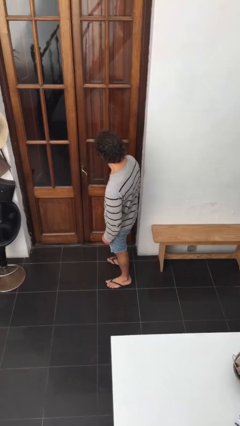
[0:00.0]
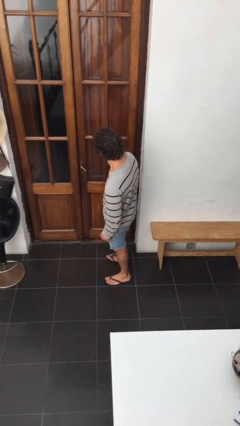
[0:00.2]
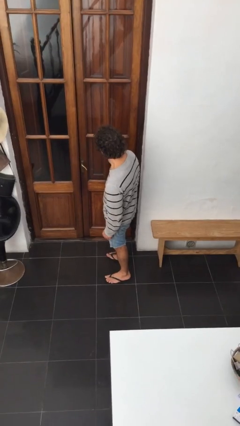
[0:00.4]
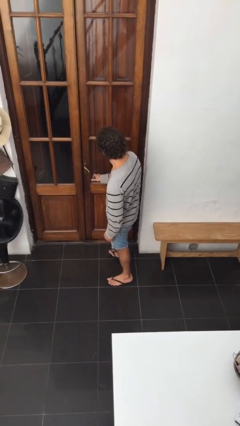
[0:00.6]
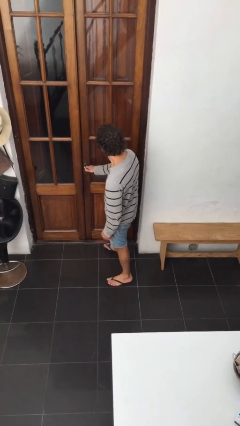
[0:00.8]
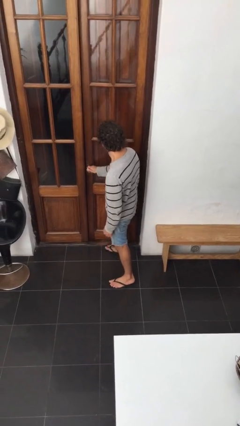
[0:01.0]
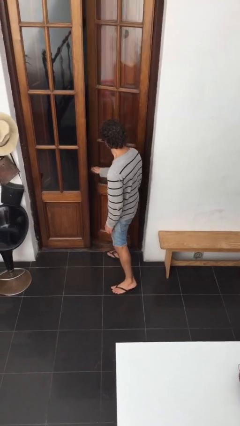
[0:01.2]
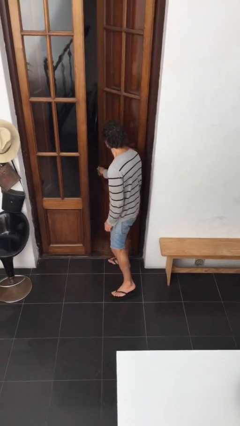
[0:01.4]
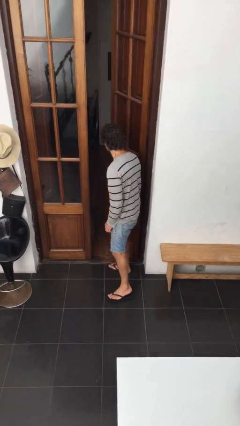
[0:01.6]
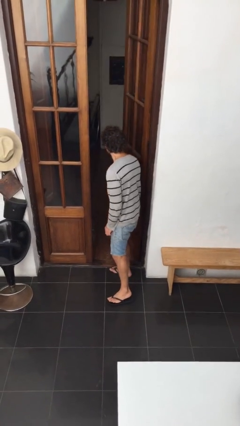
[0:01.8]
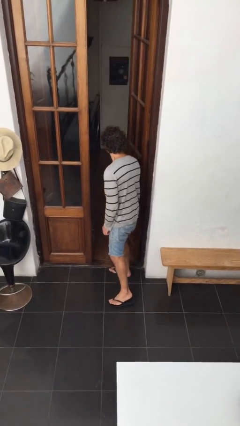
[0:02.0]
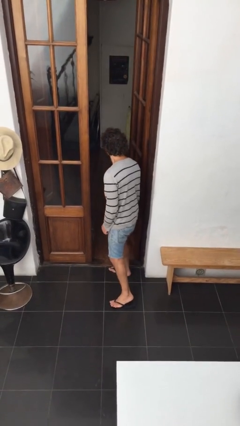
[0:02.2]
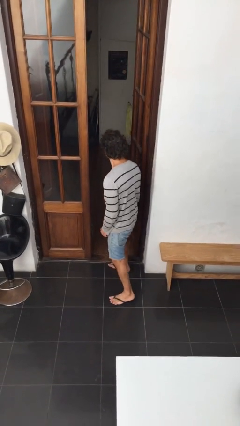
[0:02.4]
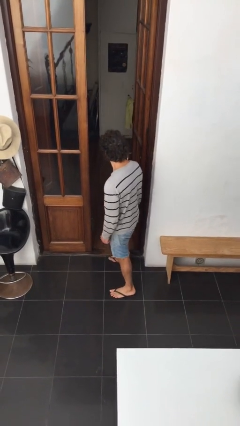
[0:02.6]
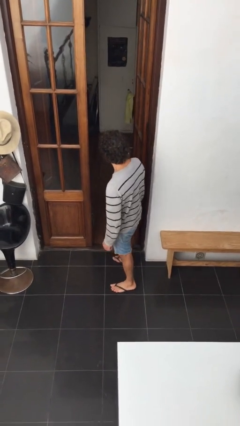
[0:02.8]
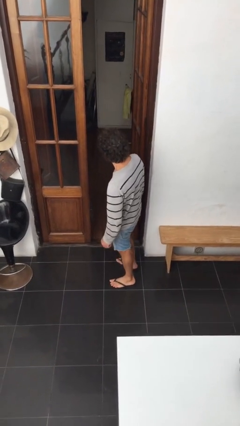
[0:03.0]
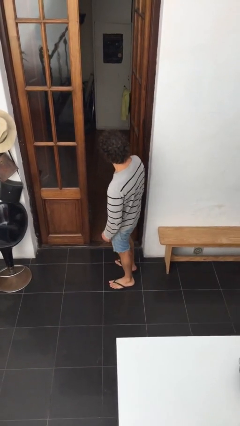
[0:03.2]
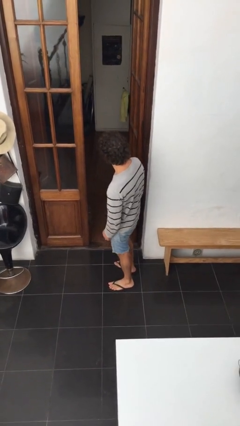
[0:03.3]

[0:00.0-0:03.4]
person opens facility door

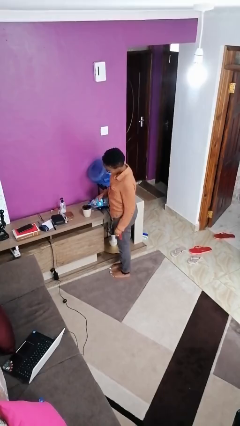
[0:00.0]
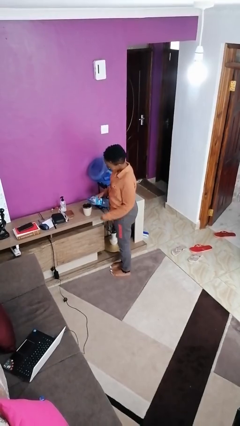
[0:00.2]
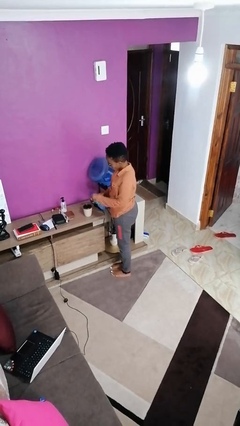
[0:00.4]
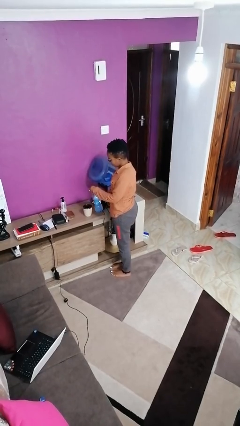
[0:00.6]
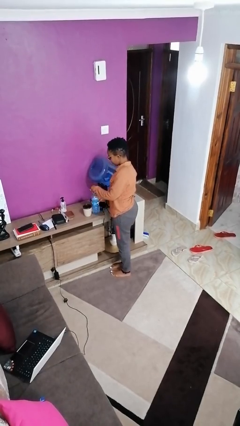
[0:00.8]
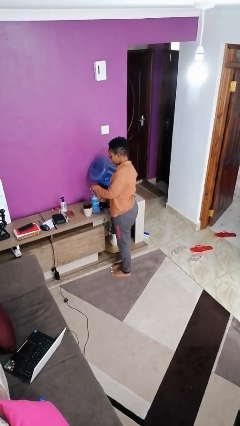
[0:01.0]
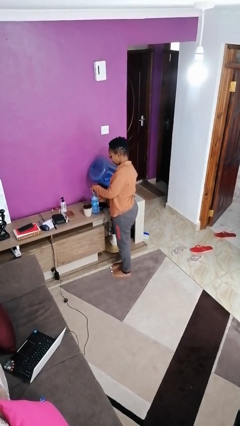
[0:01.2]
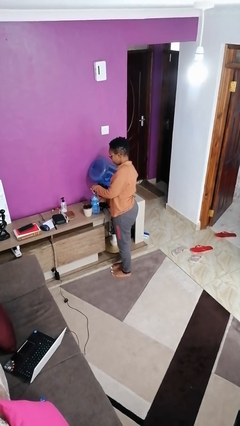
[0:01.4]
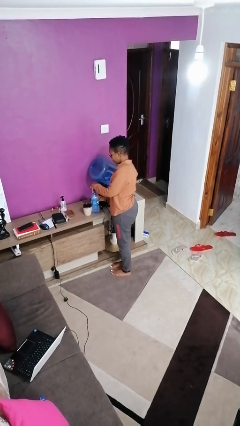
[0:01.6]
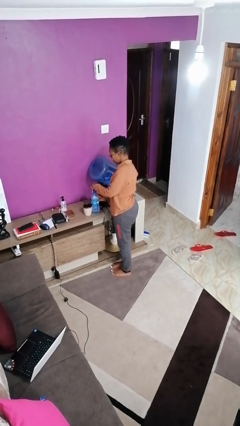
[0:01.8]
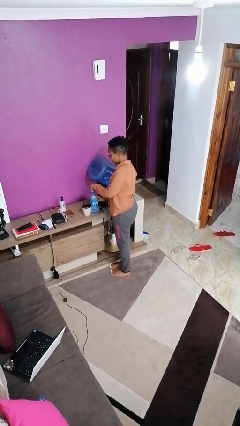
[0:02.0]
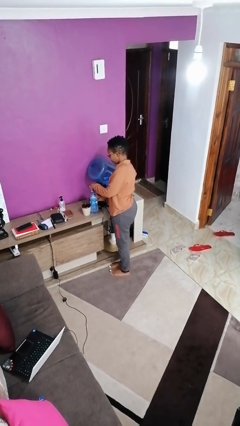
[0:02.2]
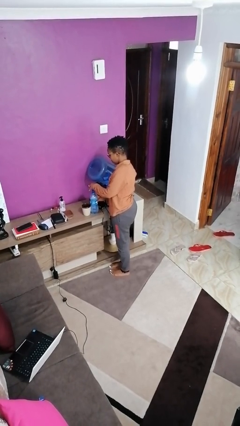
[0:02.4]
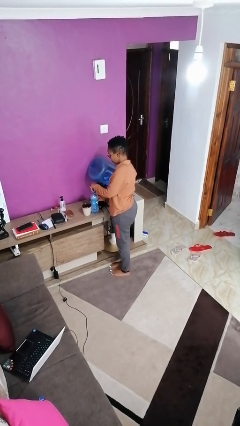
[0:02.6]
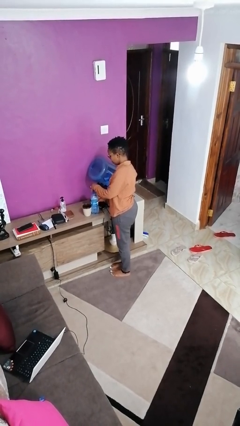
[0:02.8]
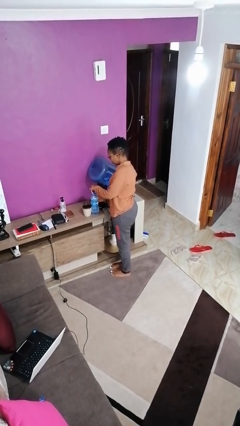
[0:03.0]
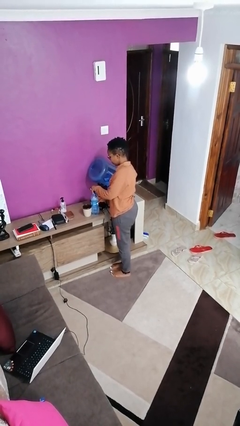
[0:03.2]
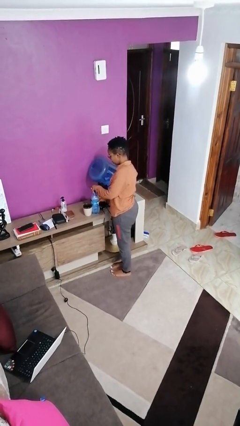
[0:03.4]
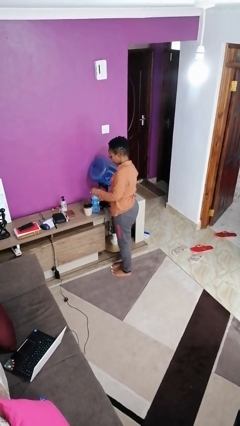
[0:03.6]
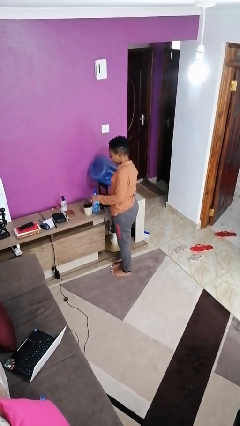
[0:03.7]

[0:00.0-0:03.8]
person screws lid to bottle

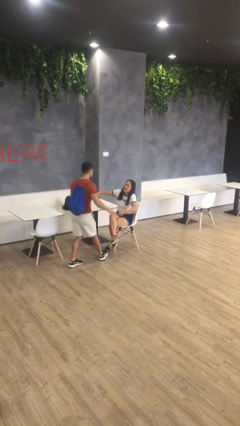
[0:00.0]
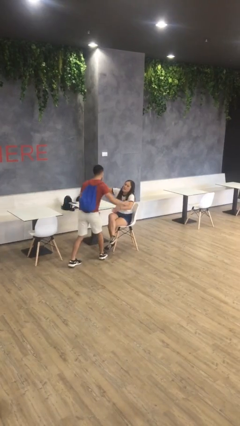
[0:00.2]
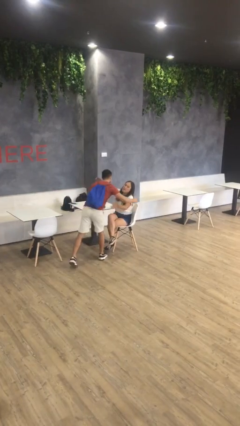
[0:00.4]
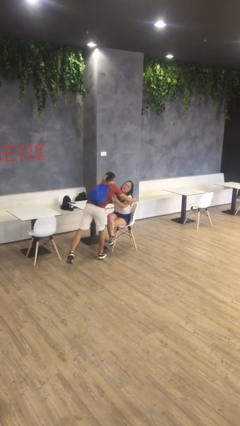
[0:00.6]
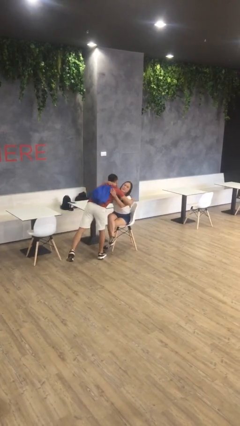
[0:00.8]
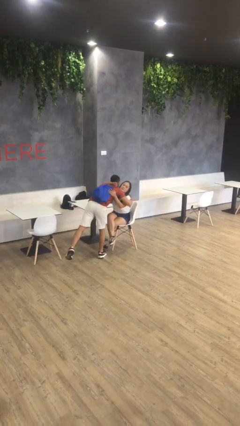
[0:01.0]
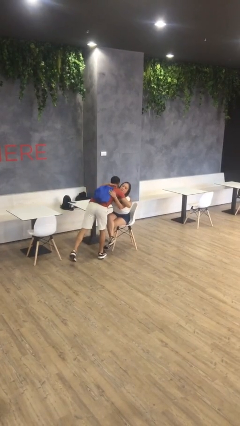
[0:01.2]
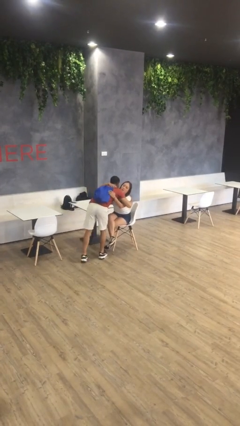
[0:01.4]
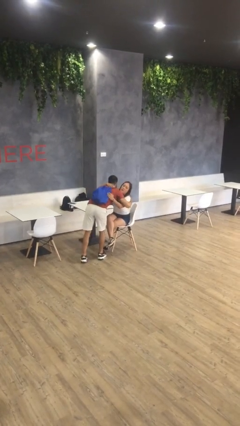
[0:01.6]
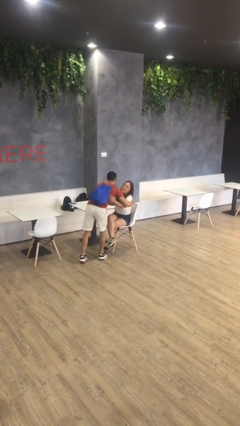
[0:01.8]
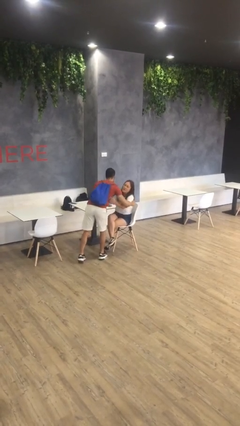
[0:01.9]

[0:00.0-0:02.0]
person embraces person

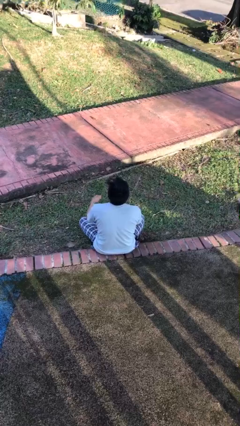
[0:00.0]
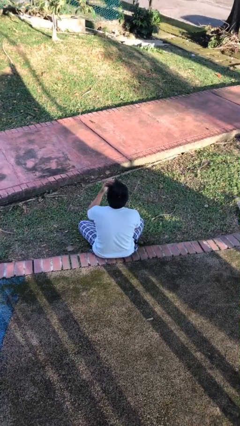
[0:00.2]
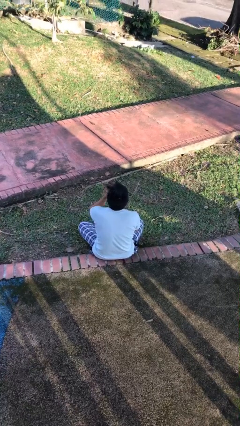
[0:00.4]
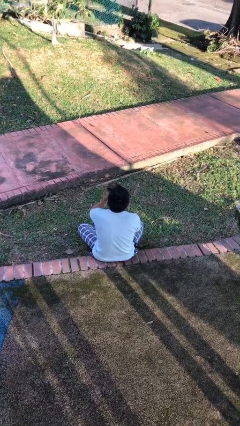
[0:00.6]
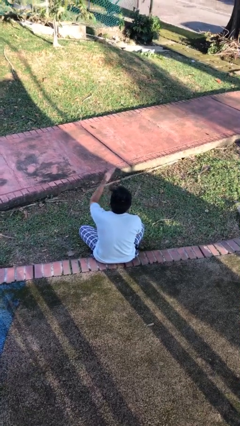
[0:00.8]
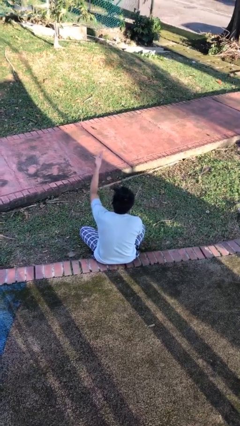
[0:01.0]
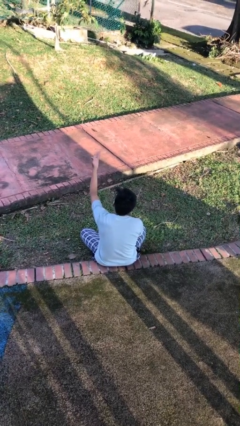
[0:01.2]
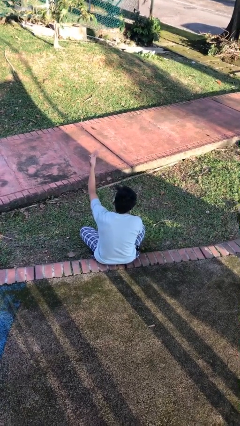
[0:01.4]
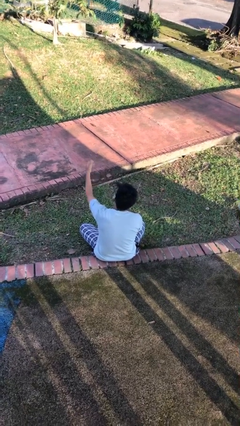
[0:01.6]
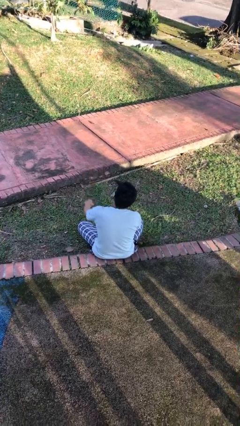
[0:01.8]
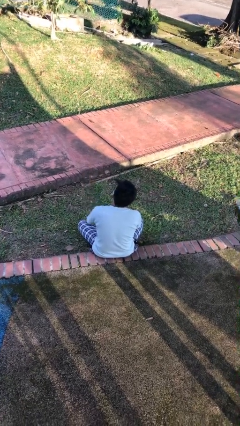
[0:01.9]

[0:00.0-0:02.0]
person gestures blow kiss

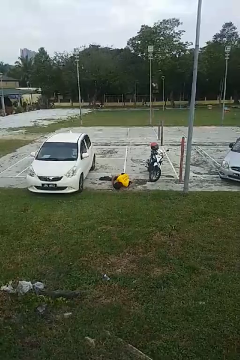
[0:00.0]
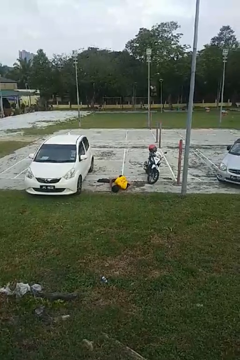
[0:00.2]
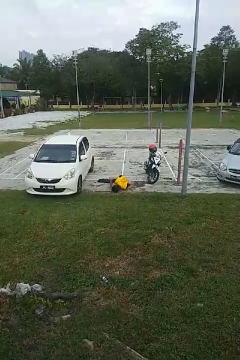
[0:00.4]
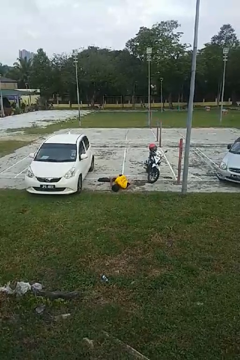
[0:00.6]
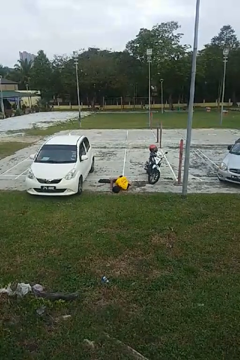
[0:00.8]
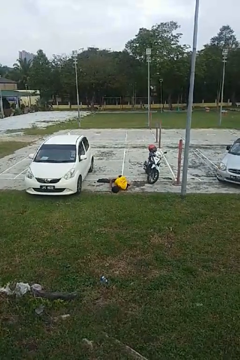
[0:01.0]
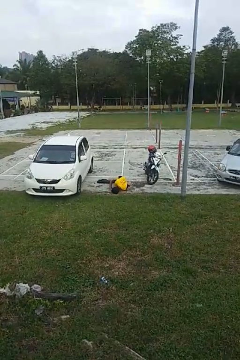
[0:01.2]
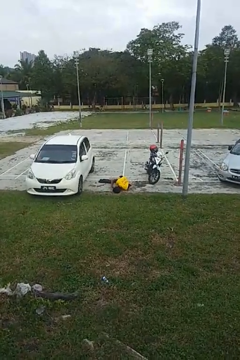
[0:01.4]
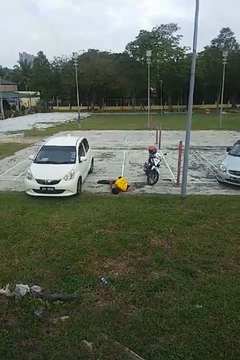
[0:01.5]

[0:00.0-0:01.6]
person lies down on floor

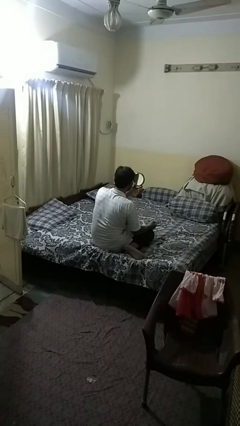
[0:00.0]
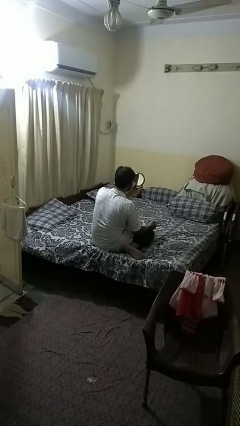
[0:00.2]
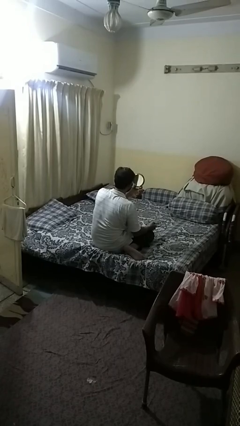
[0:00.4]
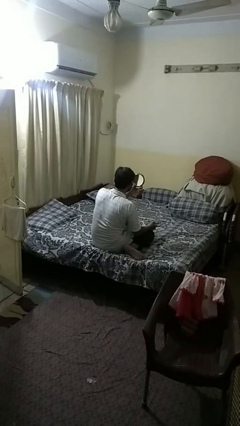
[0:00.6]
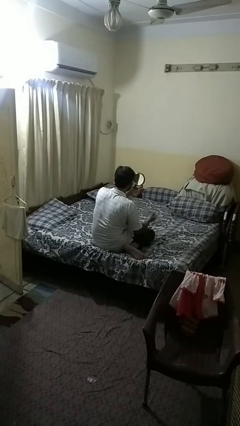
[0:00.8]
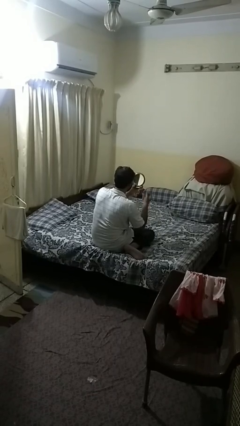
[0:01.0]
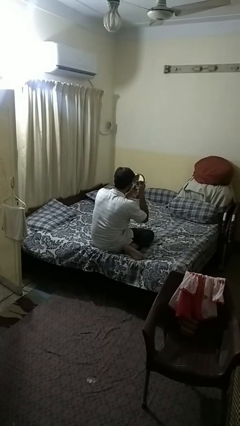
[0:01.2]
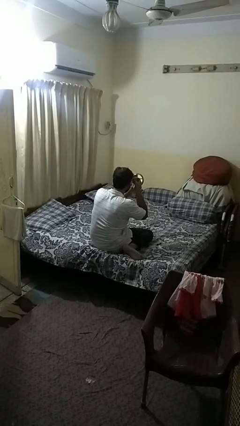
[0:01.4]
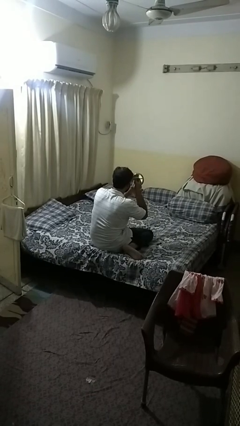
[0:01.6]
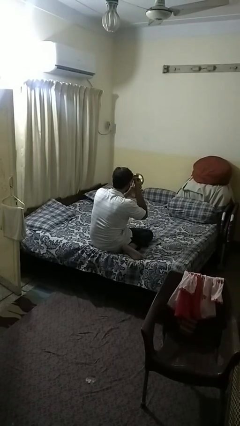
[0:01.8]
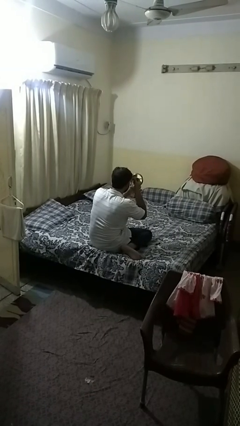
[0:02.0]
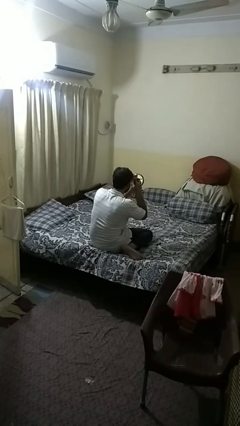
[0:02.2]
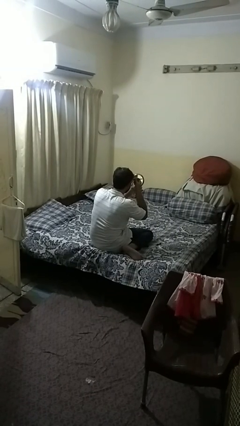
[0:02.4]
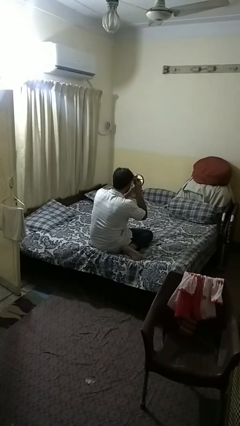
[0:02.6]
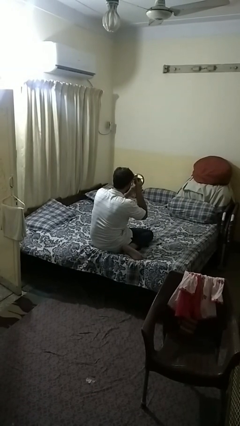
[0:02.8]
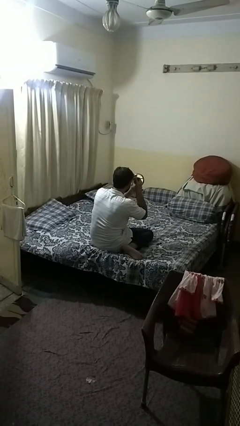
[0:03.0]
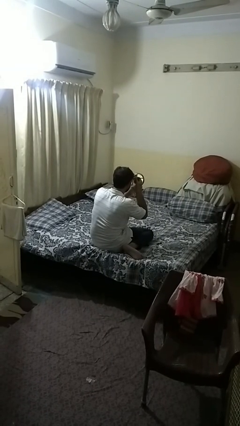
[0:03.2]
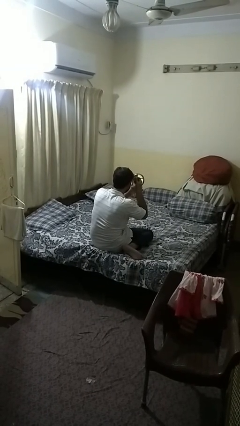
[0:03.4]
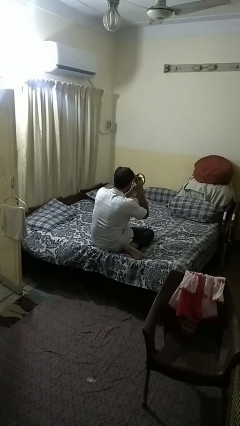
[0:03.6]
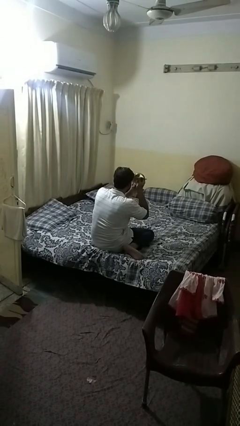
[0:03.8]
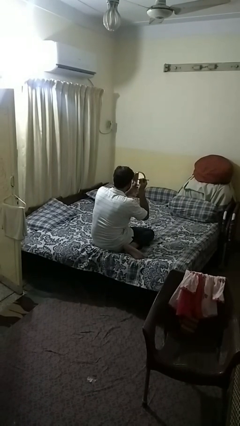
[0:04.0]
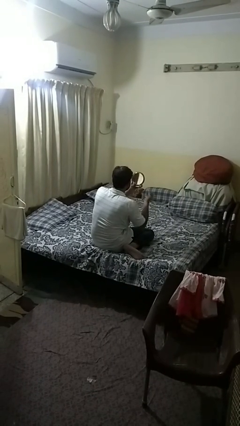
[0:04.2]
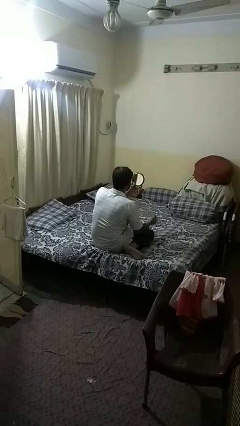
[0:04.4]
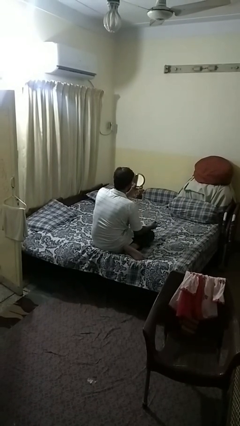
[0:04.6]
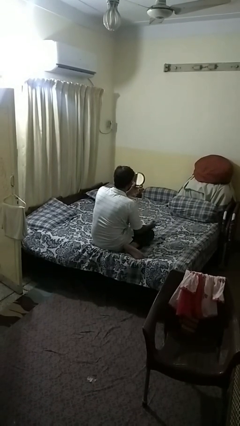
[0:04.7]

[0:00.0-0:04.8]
person applies eye makeup
